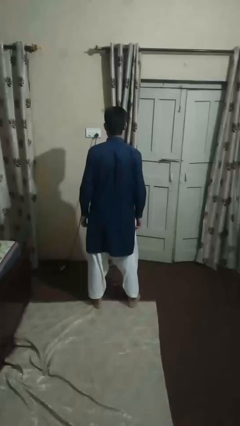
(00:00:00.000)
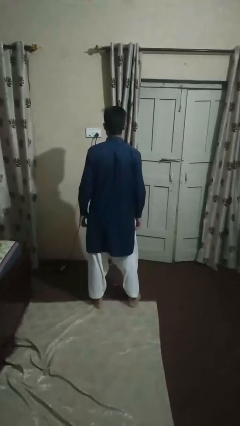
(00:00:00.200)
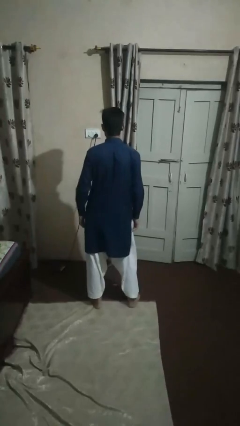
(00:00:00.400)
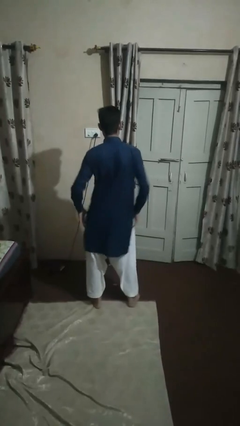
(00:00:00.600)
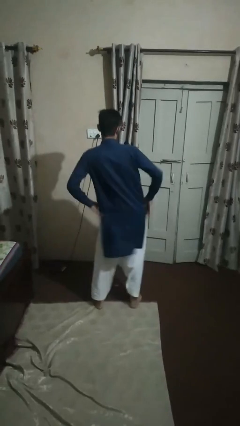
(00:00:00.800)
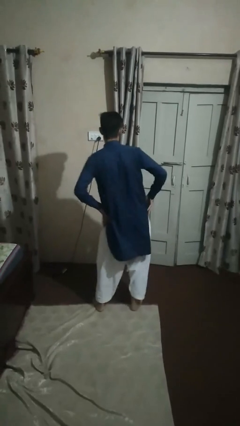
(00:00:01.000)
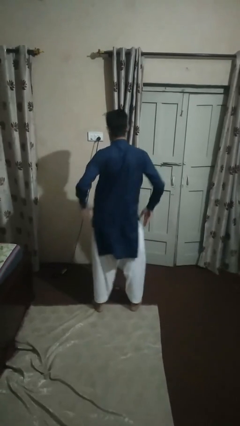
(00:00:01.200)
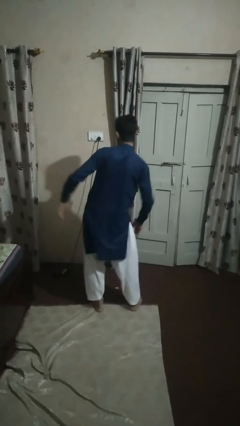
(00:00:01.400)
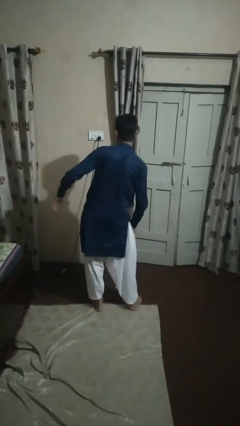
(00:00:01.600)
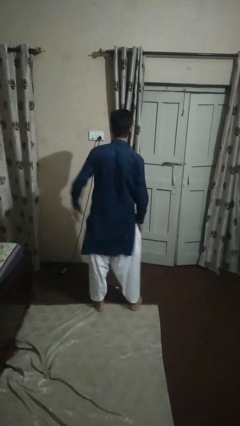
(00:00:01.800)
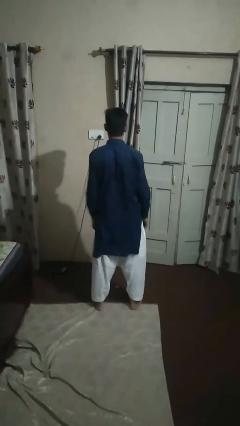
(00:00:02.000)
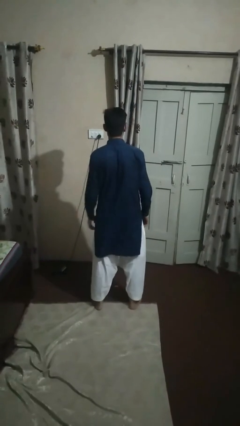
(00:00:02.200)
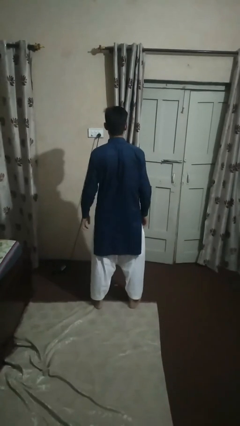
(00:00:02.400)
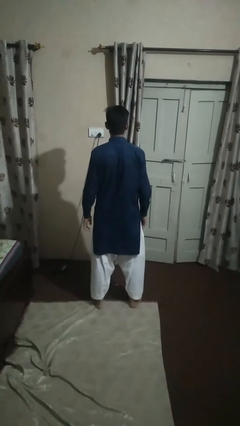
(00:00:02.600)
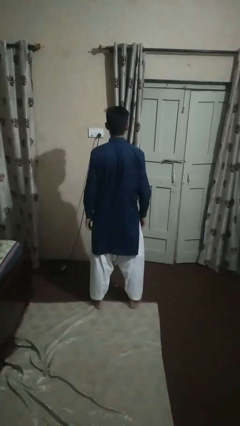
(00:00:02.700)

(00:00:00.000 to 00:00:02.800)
person wiggles hips

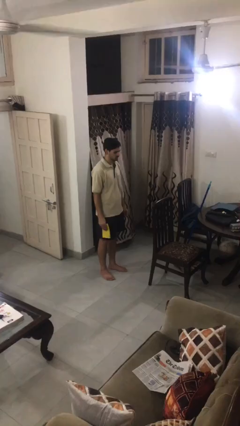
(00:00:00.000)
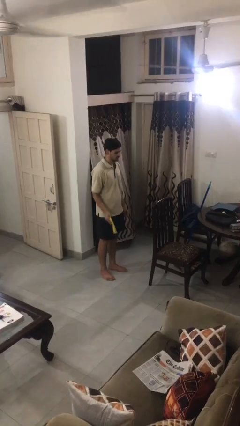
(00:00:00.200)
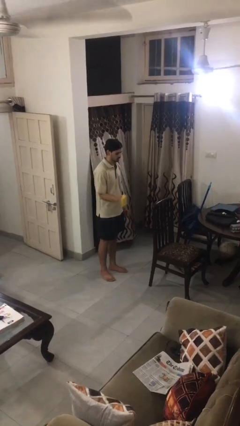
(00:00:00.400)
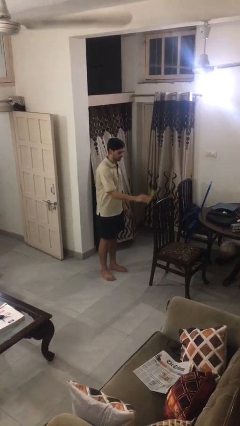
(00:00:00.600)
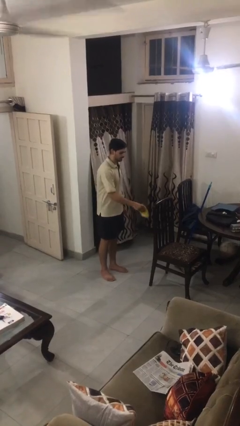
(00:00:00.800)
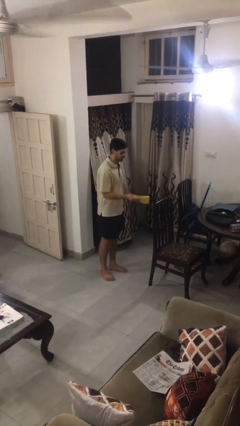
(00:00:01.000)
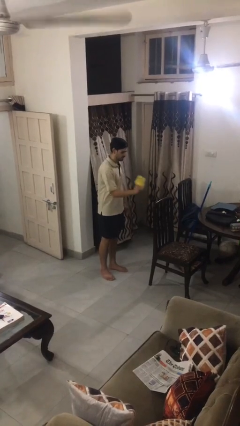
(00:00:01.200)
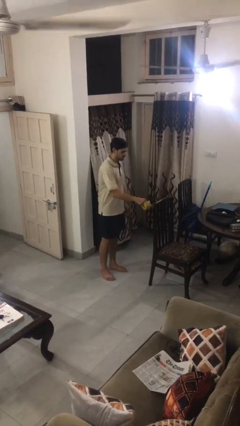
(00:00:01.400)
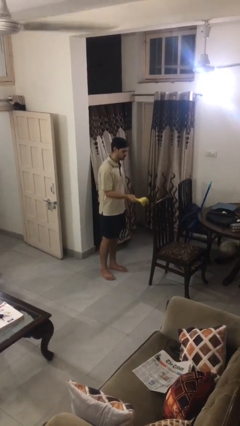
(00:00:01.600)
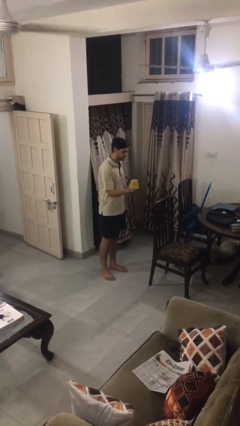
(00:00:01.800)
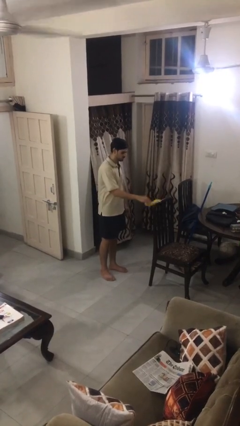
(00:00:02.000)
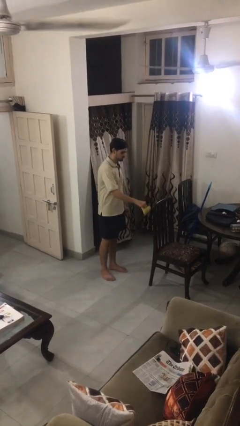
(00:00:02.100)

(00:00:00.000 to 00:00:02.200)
person dusts furniture

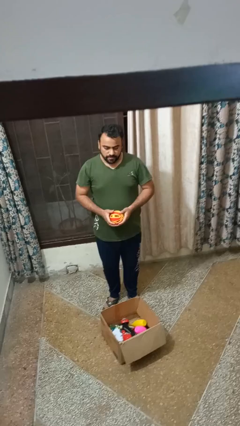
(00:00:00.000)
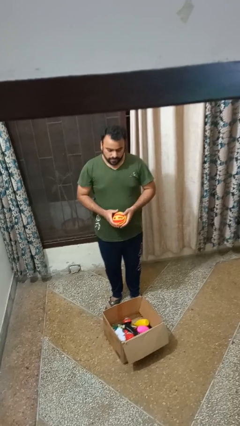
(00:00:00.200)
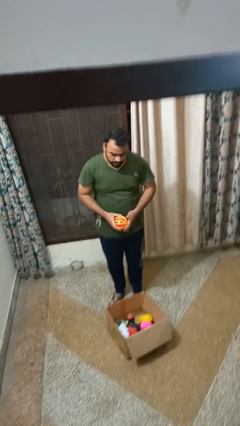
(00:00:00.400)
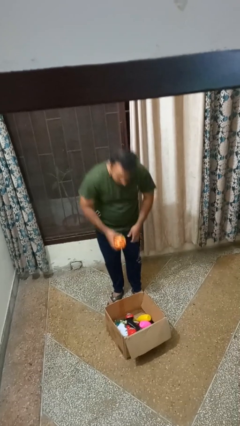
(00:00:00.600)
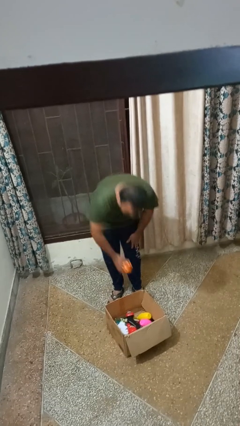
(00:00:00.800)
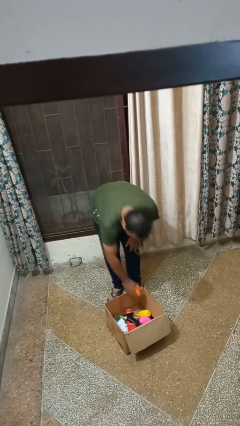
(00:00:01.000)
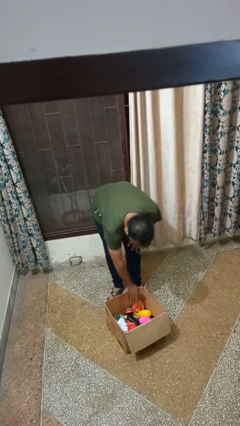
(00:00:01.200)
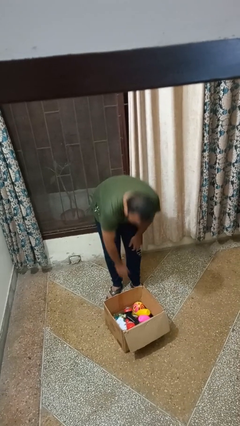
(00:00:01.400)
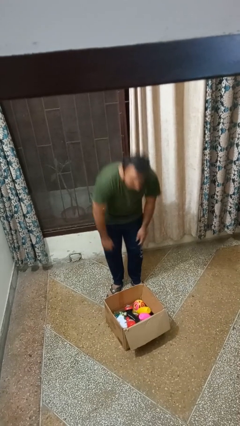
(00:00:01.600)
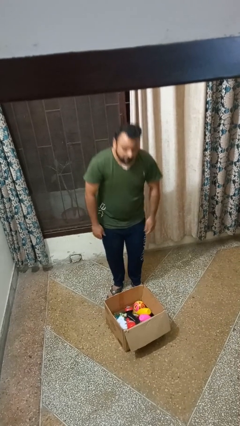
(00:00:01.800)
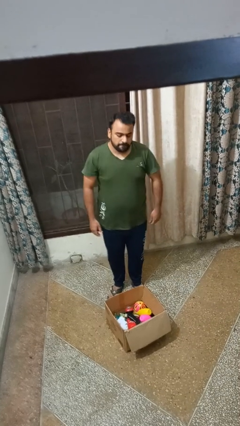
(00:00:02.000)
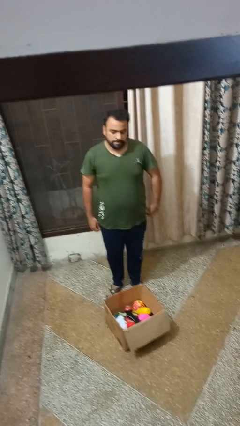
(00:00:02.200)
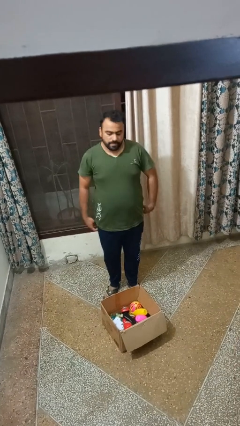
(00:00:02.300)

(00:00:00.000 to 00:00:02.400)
person puts object into box

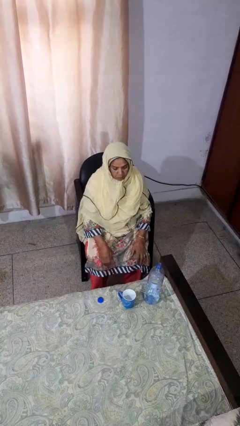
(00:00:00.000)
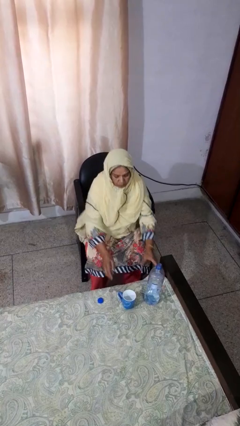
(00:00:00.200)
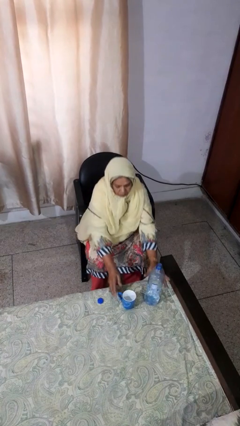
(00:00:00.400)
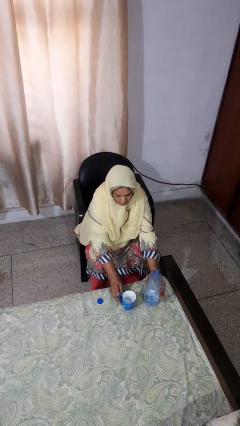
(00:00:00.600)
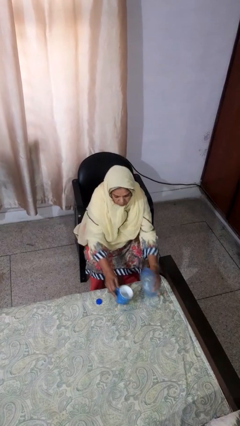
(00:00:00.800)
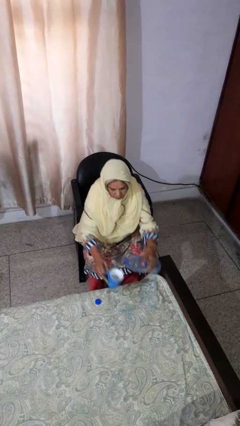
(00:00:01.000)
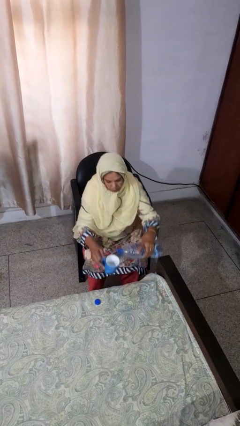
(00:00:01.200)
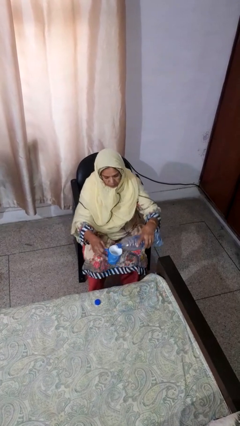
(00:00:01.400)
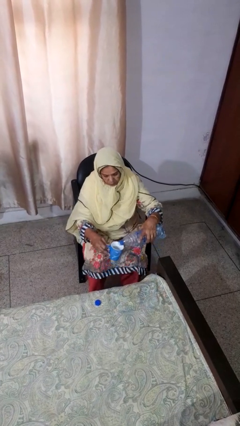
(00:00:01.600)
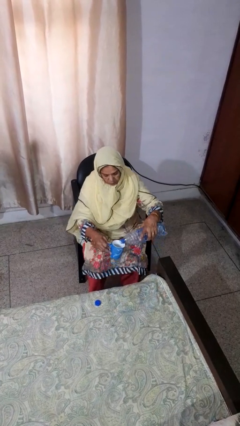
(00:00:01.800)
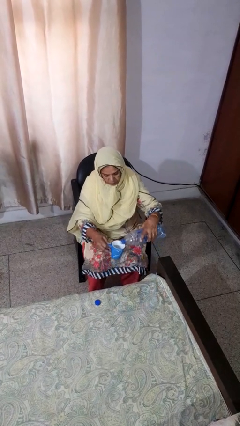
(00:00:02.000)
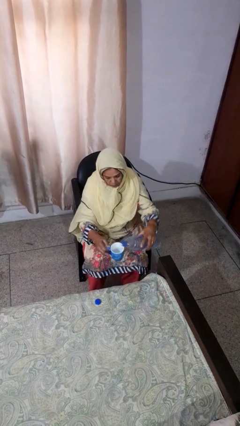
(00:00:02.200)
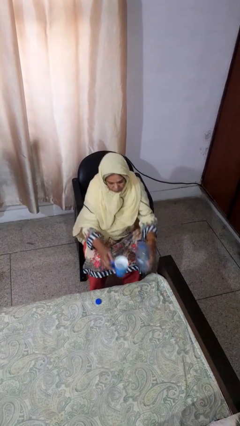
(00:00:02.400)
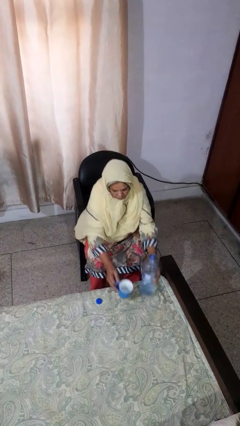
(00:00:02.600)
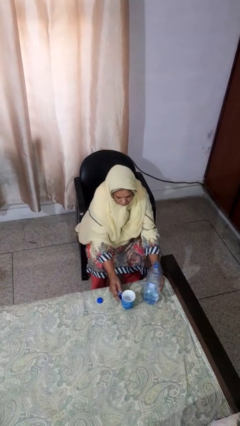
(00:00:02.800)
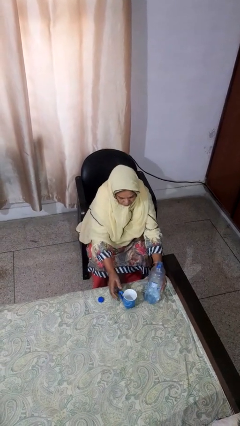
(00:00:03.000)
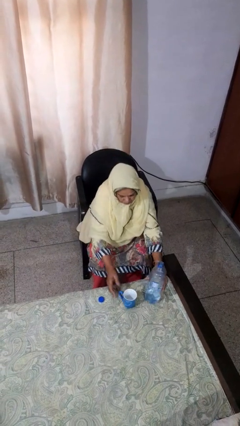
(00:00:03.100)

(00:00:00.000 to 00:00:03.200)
person pours liquid into cup

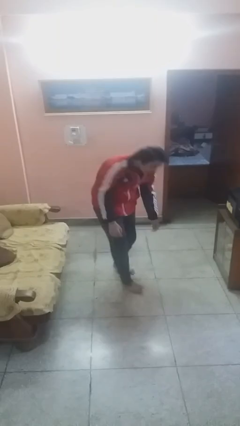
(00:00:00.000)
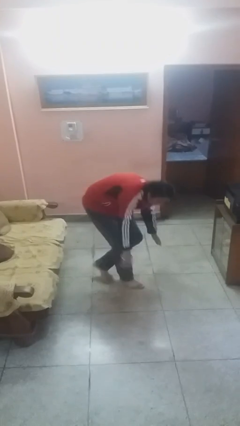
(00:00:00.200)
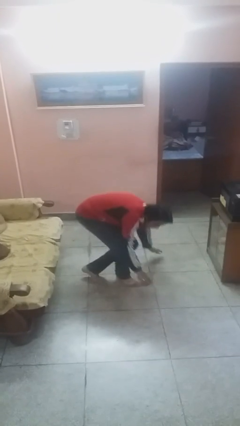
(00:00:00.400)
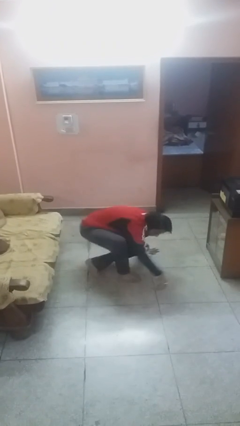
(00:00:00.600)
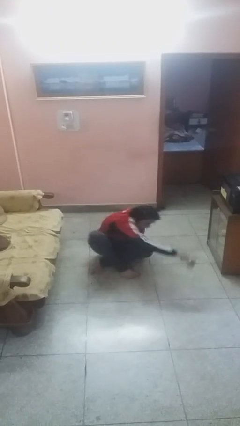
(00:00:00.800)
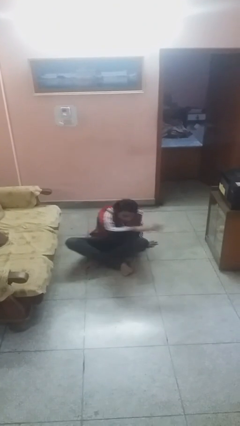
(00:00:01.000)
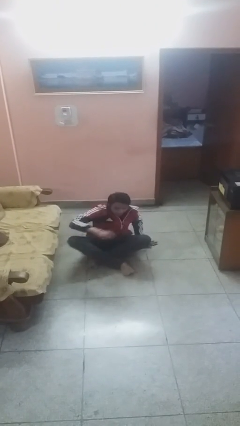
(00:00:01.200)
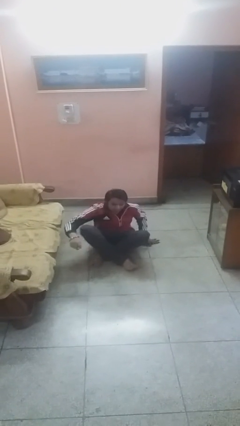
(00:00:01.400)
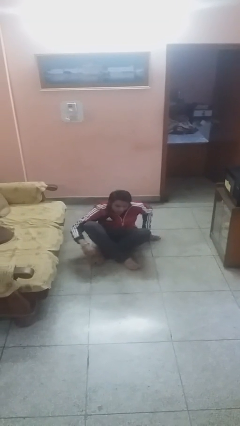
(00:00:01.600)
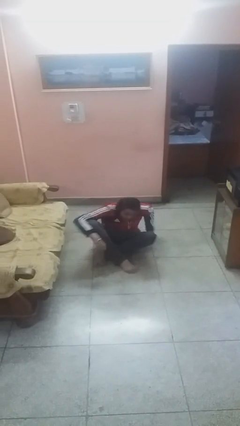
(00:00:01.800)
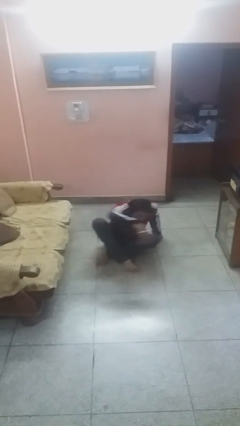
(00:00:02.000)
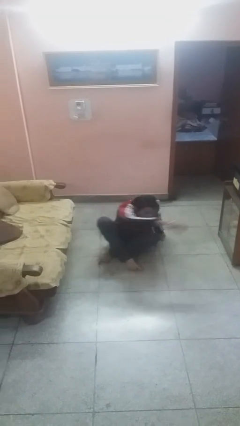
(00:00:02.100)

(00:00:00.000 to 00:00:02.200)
person sits down

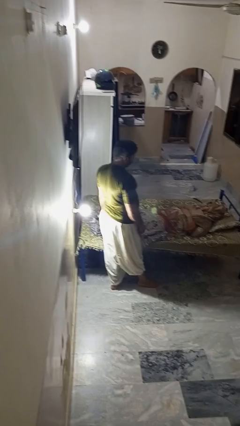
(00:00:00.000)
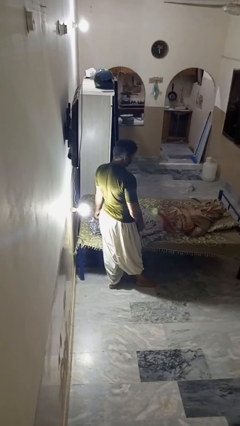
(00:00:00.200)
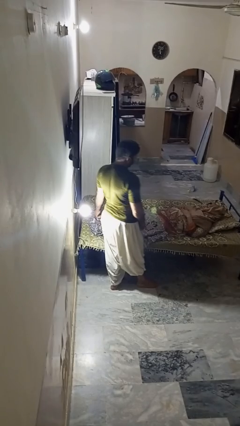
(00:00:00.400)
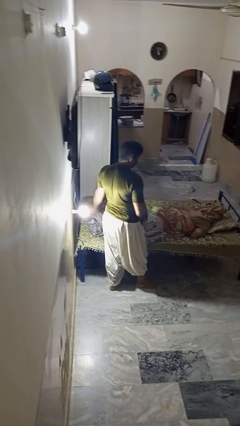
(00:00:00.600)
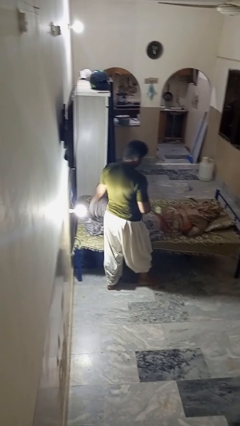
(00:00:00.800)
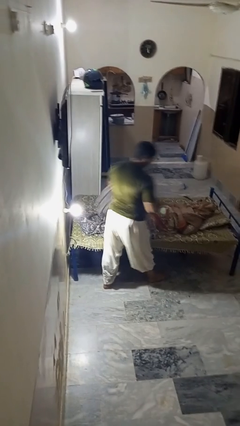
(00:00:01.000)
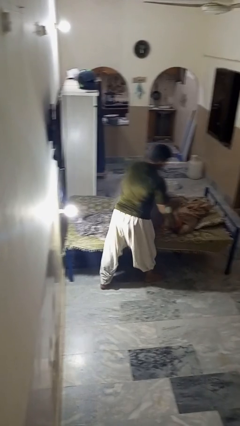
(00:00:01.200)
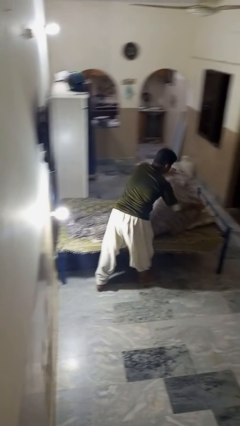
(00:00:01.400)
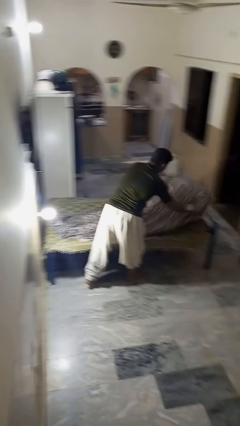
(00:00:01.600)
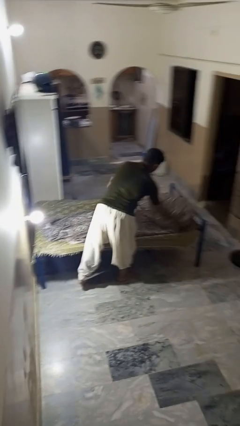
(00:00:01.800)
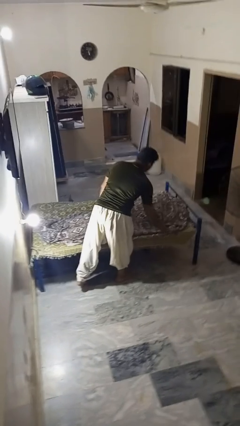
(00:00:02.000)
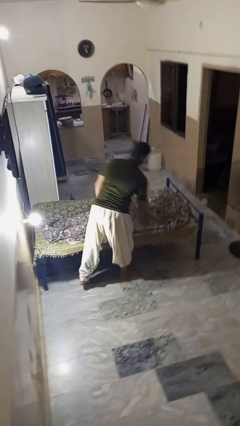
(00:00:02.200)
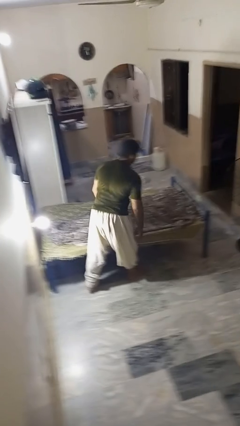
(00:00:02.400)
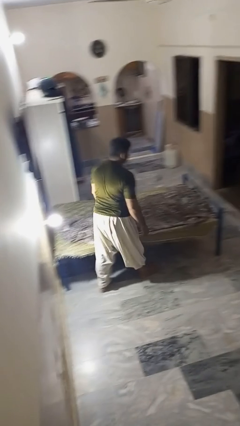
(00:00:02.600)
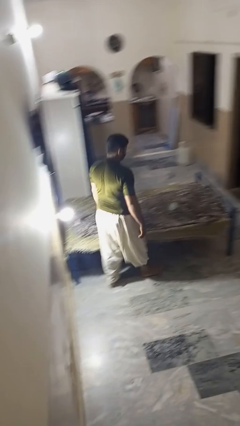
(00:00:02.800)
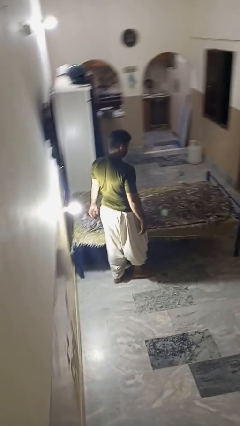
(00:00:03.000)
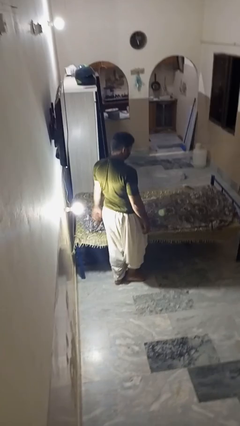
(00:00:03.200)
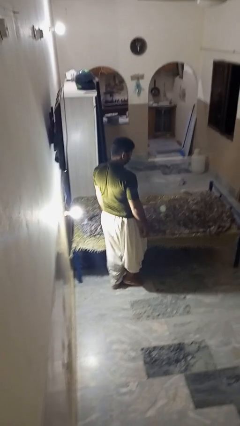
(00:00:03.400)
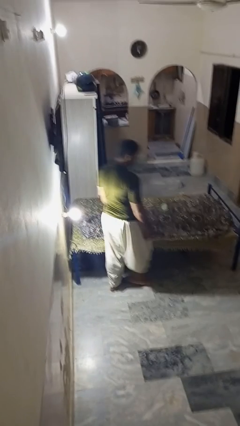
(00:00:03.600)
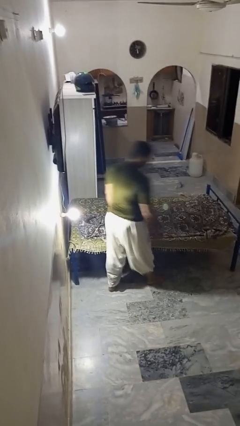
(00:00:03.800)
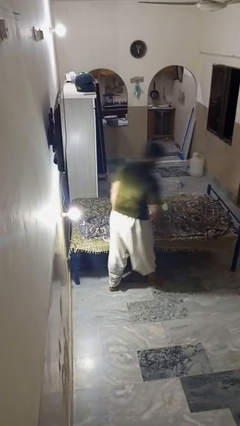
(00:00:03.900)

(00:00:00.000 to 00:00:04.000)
person covers friend with blanket

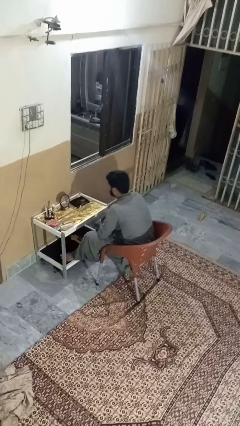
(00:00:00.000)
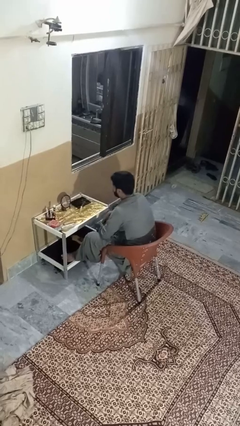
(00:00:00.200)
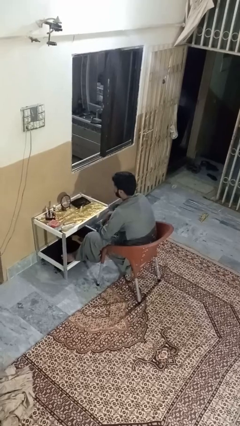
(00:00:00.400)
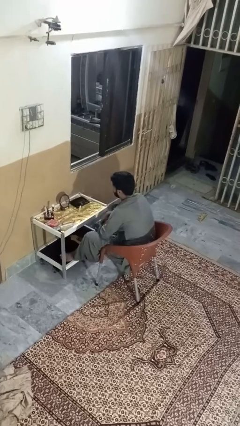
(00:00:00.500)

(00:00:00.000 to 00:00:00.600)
person extinguishes candle
